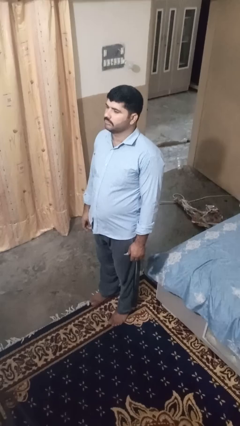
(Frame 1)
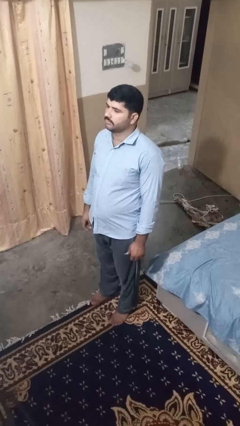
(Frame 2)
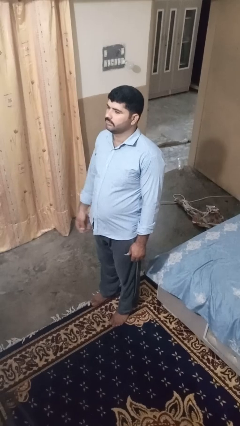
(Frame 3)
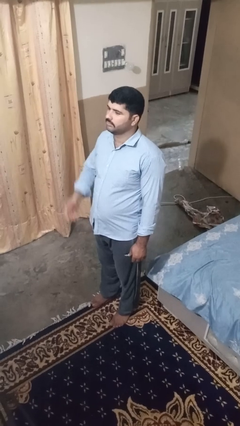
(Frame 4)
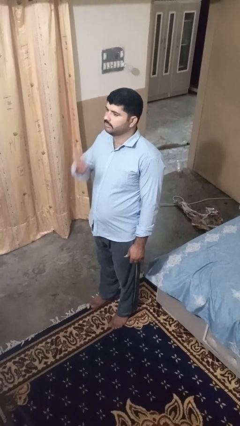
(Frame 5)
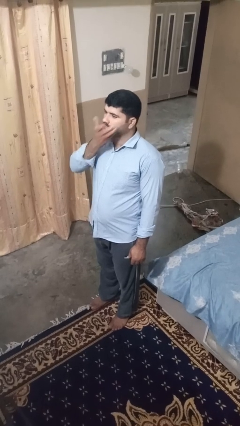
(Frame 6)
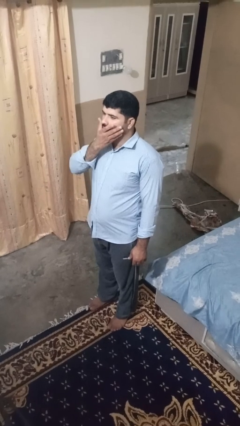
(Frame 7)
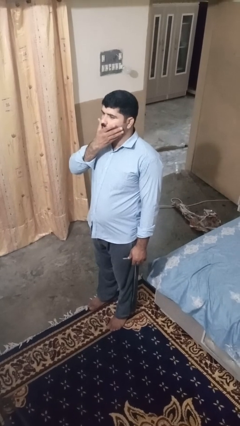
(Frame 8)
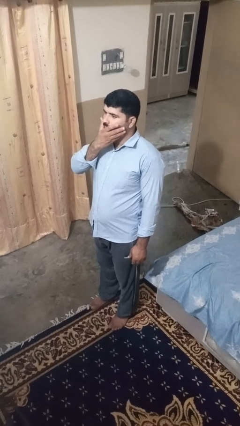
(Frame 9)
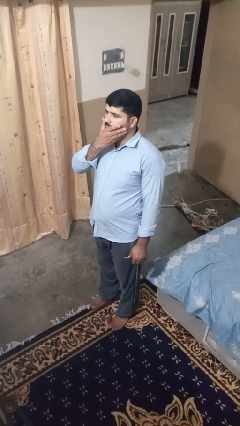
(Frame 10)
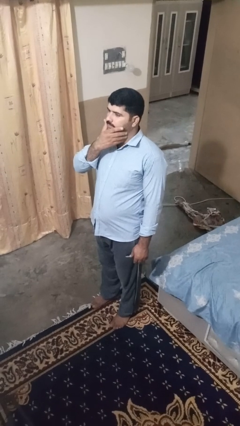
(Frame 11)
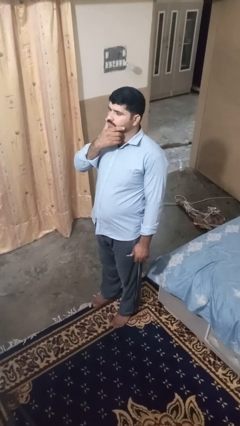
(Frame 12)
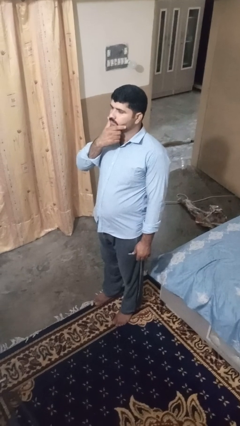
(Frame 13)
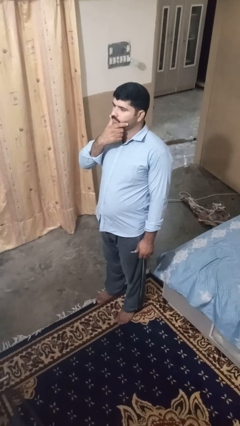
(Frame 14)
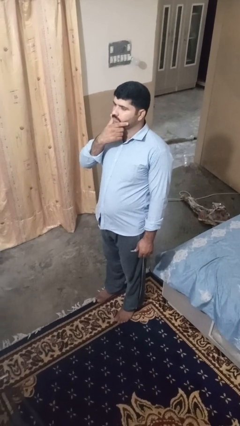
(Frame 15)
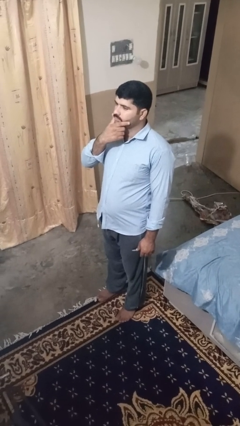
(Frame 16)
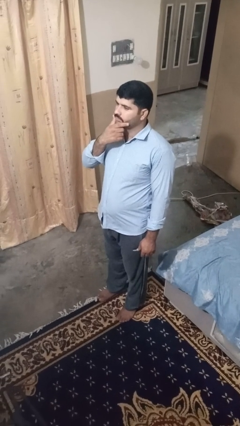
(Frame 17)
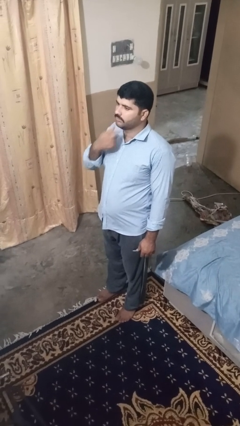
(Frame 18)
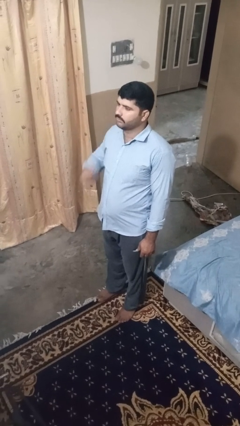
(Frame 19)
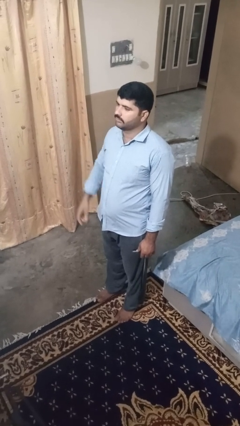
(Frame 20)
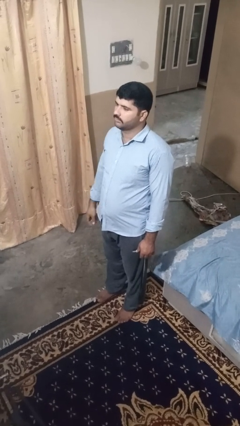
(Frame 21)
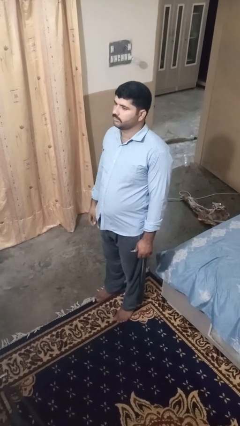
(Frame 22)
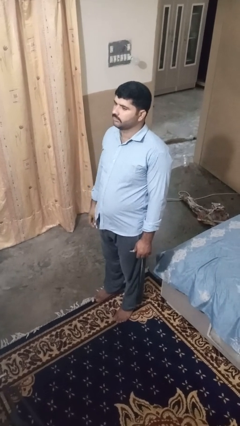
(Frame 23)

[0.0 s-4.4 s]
person strokes chin

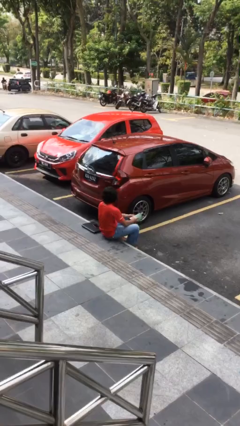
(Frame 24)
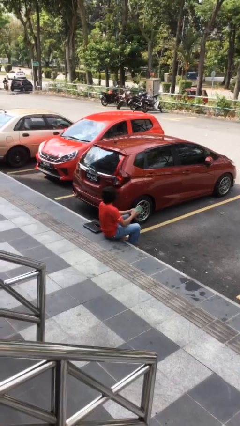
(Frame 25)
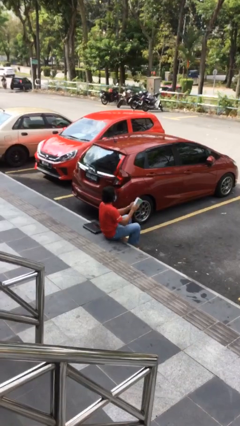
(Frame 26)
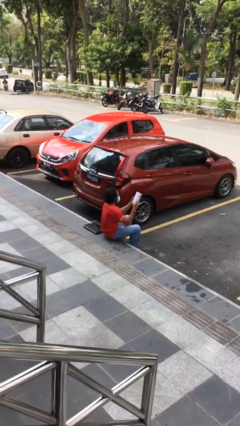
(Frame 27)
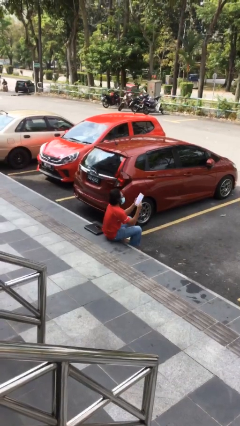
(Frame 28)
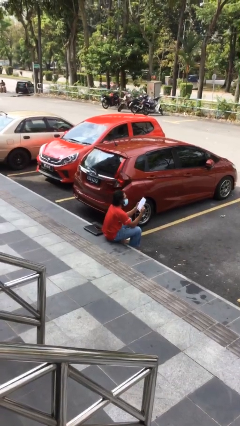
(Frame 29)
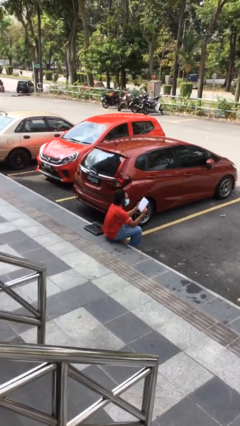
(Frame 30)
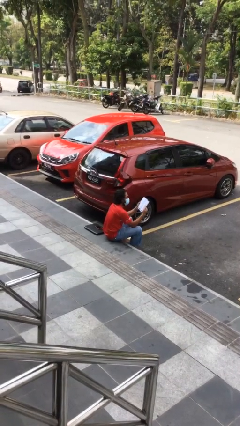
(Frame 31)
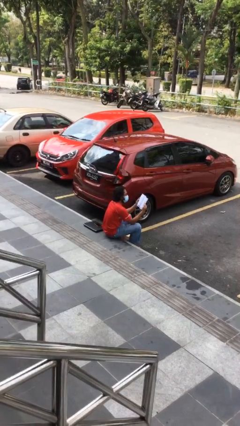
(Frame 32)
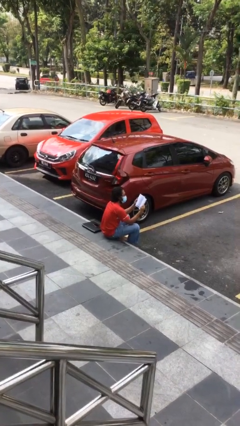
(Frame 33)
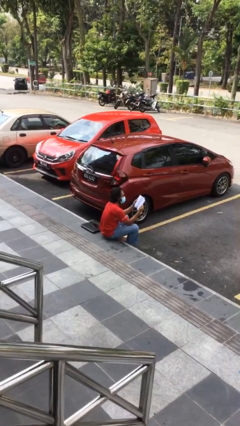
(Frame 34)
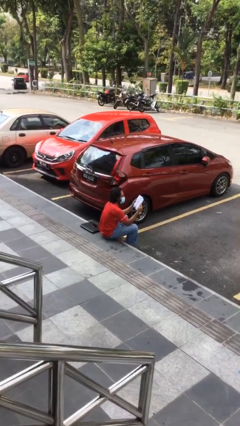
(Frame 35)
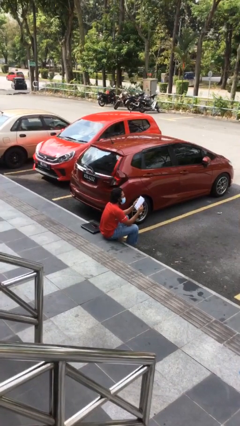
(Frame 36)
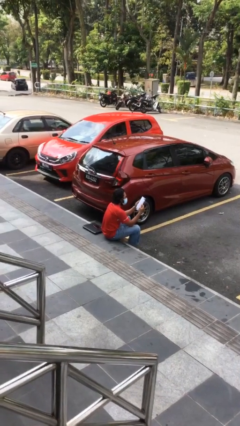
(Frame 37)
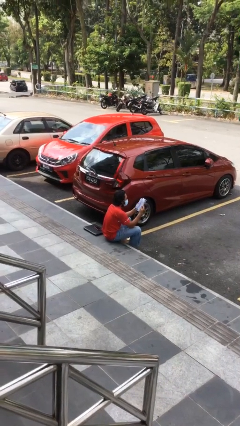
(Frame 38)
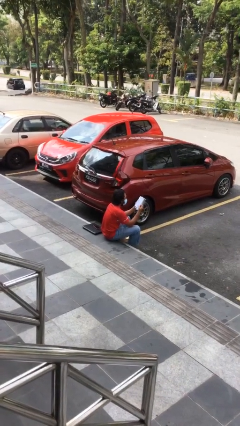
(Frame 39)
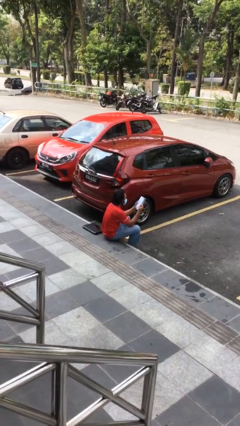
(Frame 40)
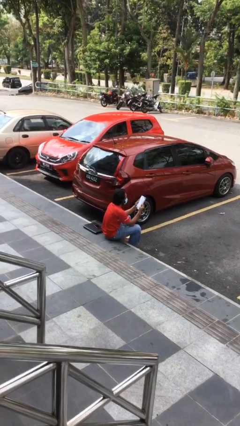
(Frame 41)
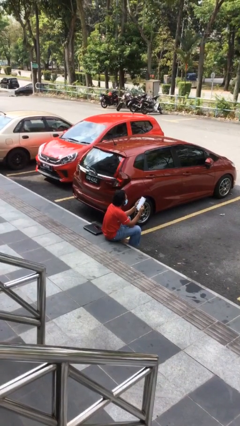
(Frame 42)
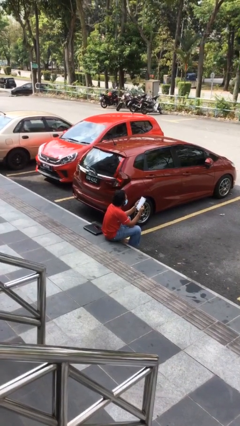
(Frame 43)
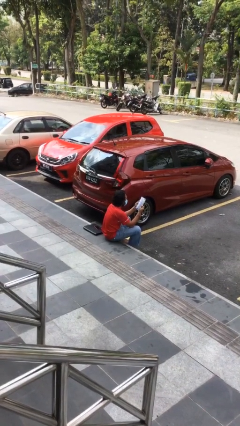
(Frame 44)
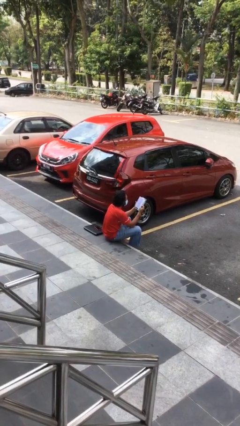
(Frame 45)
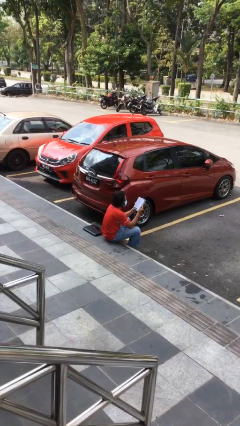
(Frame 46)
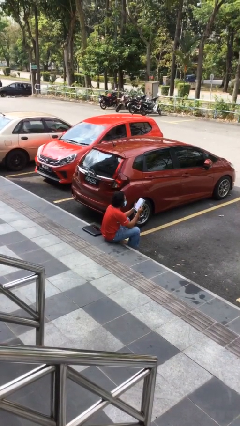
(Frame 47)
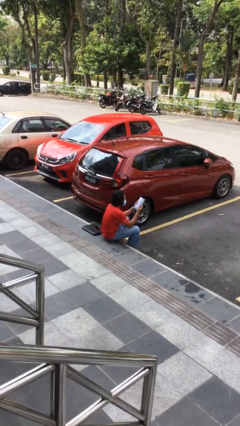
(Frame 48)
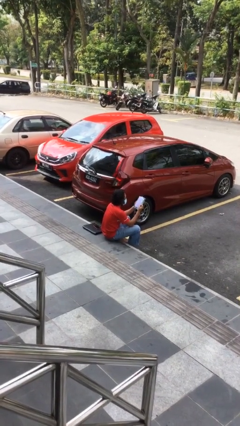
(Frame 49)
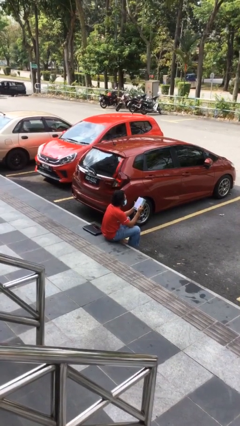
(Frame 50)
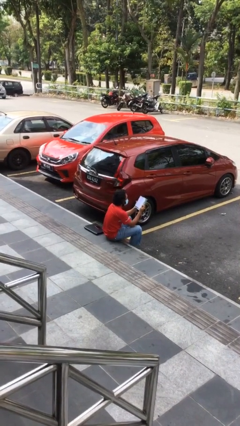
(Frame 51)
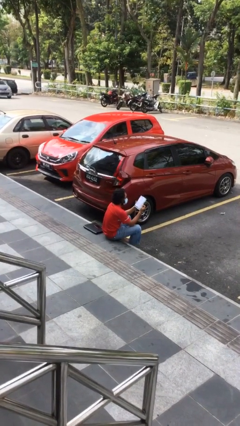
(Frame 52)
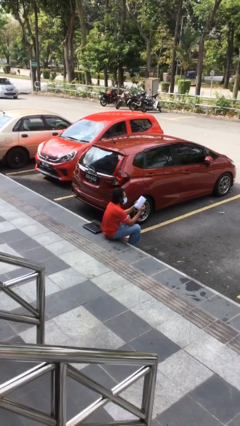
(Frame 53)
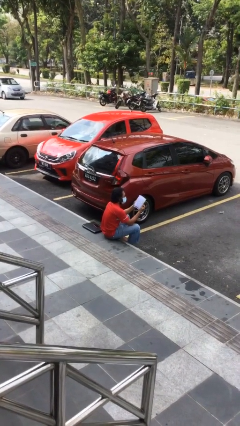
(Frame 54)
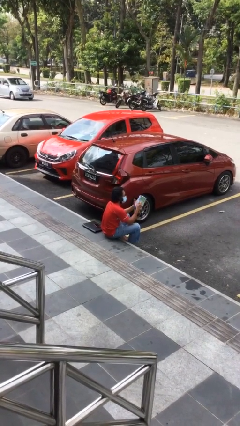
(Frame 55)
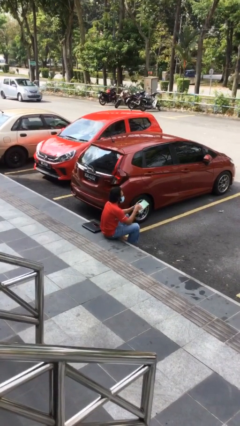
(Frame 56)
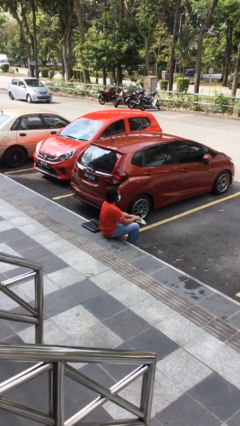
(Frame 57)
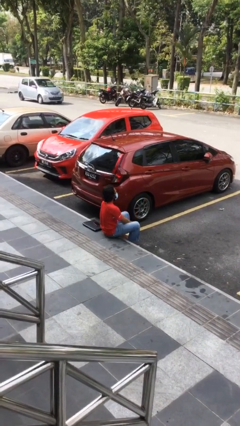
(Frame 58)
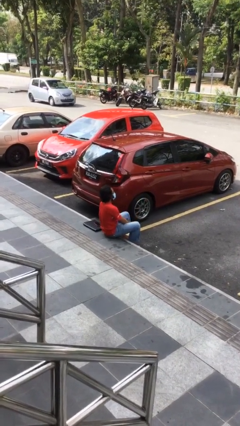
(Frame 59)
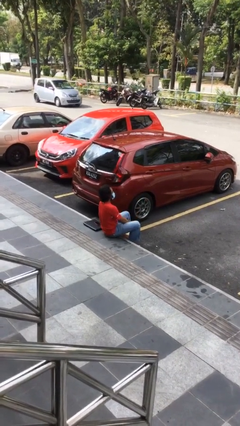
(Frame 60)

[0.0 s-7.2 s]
person reads document

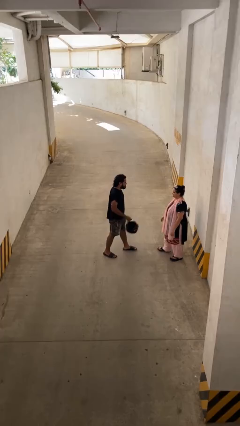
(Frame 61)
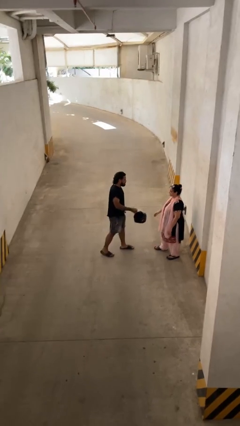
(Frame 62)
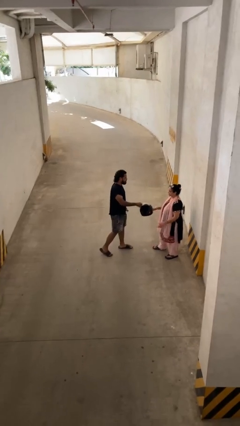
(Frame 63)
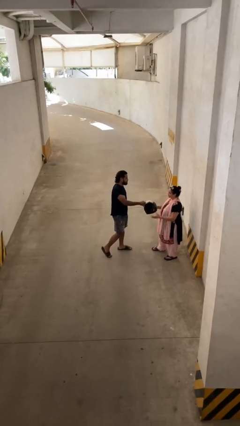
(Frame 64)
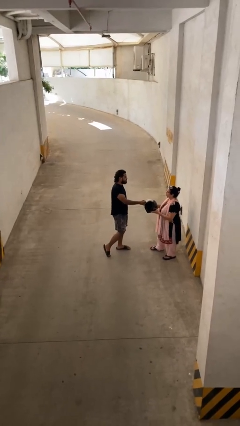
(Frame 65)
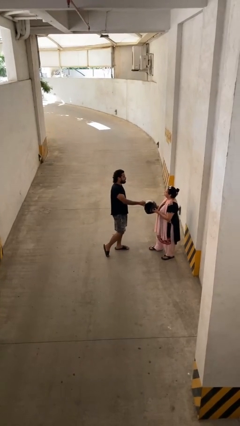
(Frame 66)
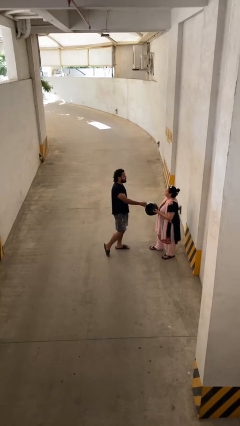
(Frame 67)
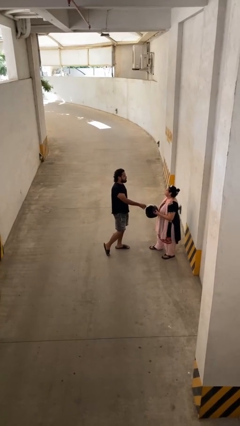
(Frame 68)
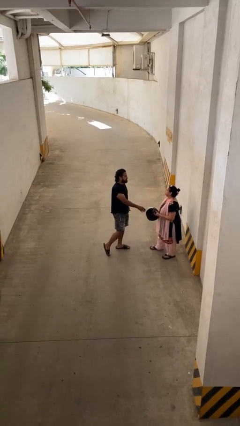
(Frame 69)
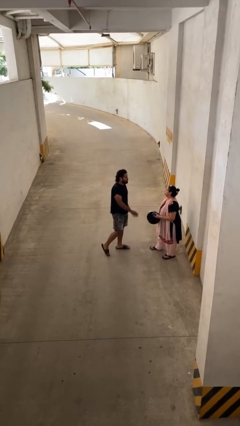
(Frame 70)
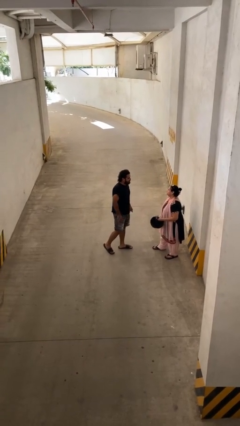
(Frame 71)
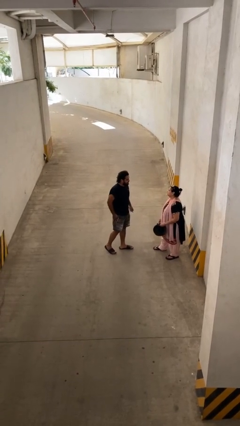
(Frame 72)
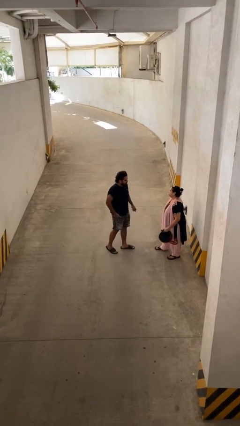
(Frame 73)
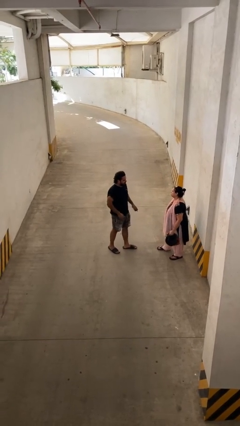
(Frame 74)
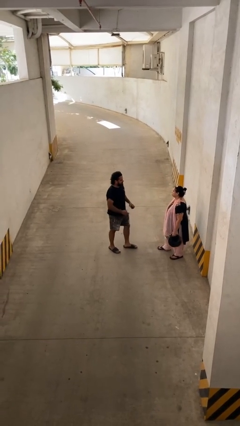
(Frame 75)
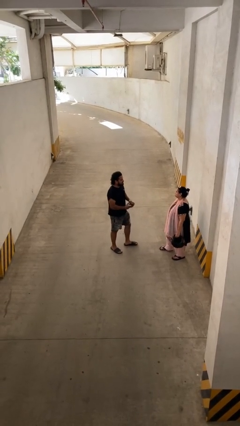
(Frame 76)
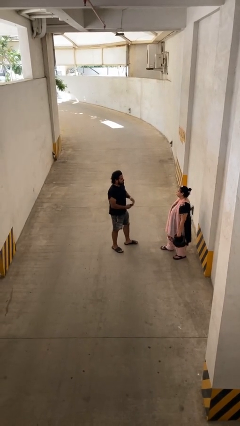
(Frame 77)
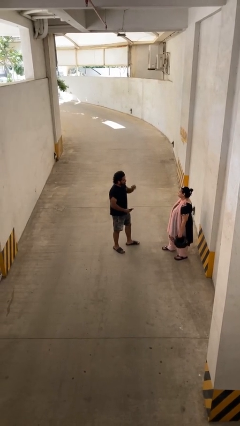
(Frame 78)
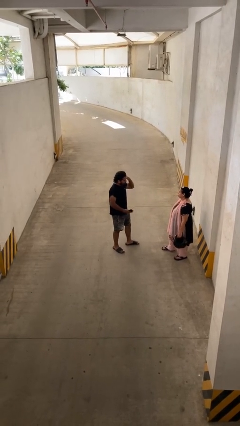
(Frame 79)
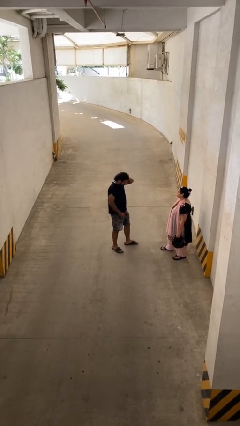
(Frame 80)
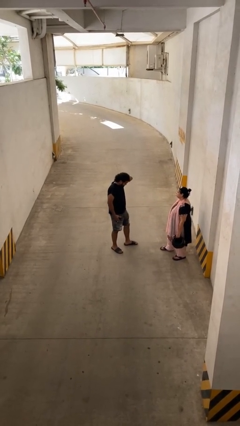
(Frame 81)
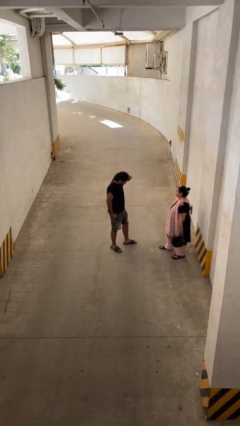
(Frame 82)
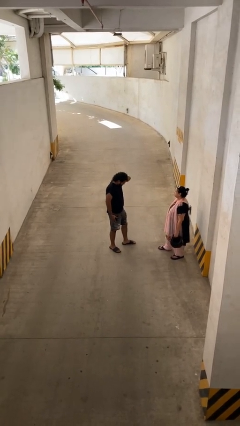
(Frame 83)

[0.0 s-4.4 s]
person transfers object to person

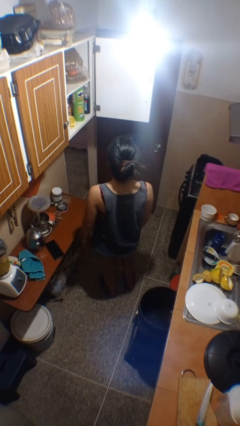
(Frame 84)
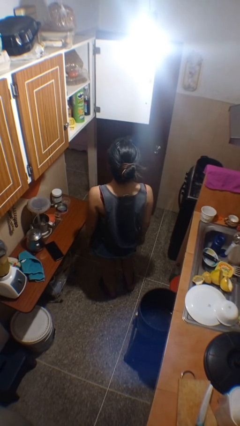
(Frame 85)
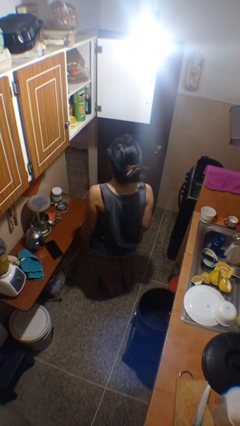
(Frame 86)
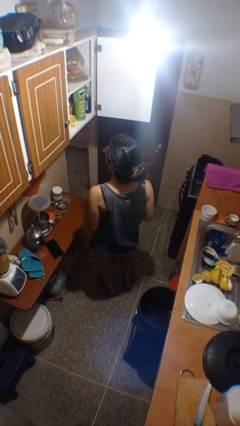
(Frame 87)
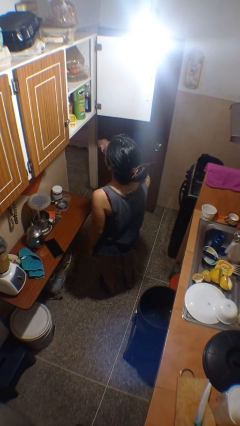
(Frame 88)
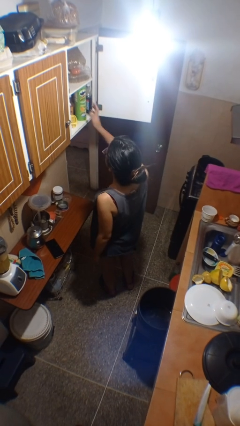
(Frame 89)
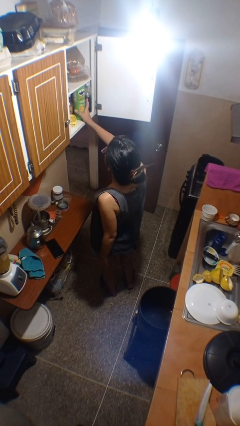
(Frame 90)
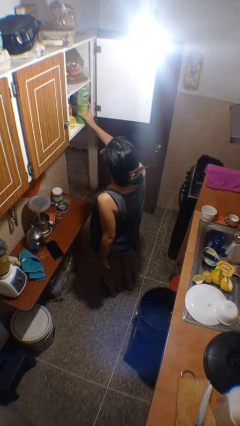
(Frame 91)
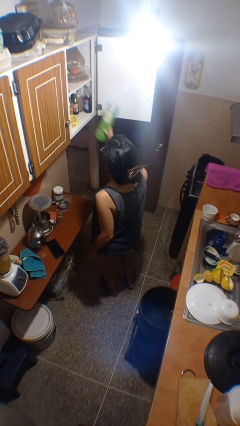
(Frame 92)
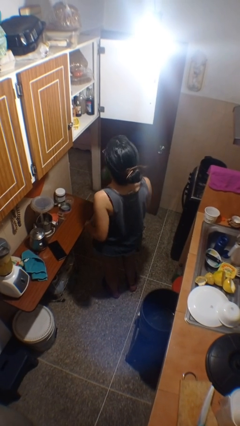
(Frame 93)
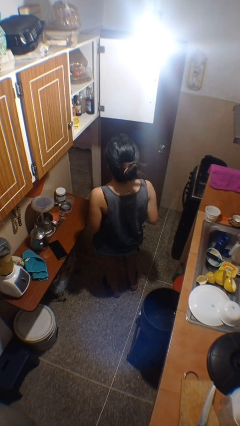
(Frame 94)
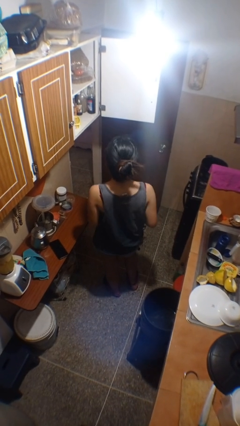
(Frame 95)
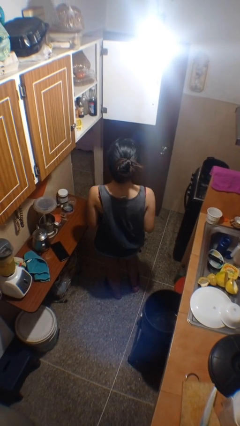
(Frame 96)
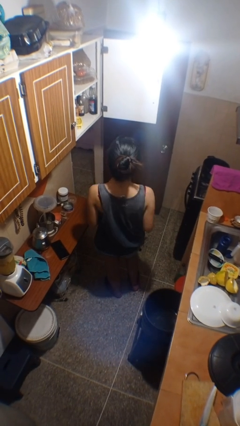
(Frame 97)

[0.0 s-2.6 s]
person takes object from cabinet
